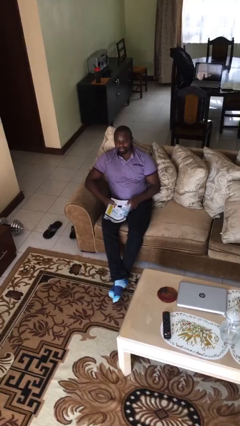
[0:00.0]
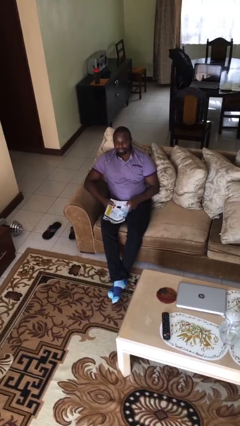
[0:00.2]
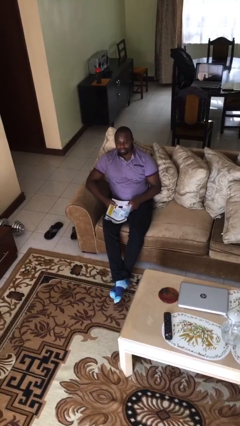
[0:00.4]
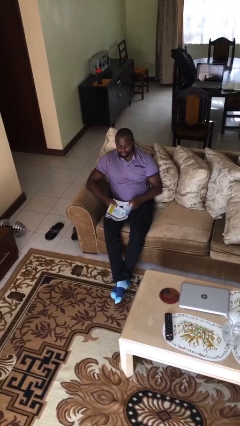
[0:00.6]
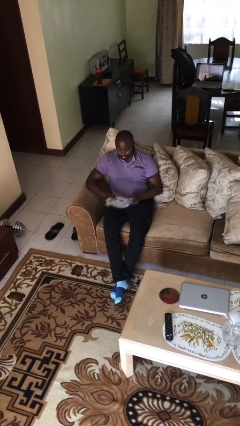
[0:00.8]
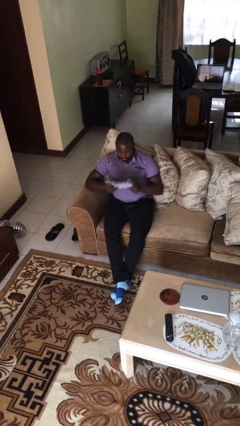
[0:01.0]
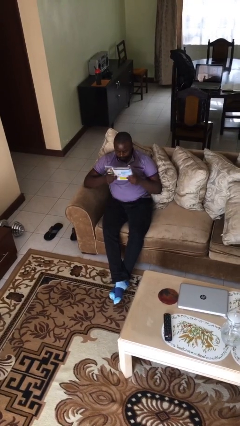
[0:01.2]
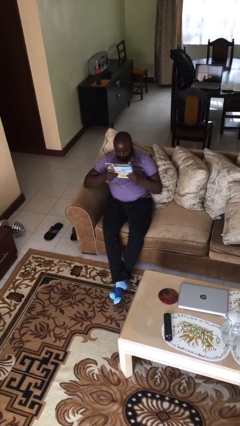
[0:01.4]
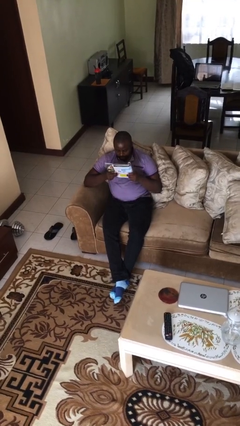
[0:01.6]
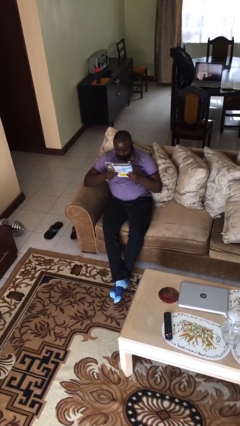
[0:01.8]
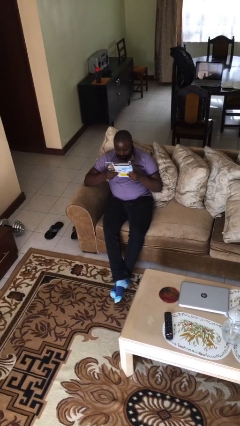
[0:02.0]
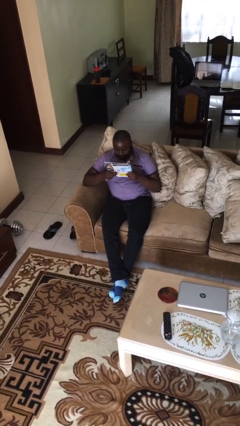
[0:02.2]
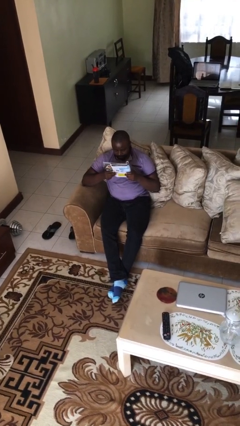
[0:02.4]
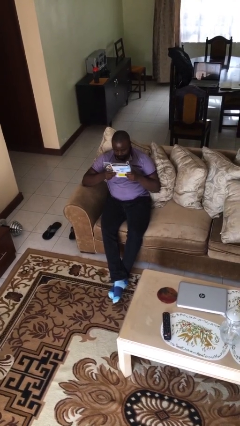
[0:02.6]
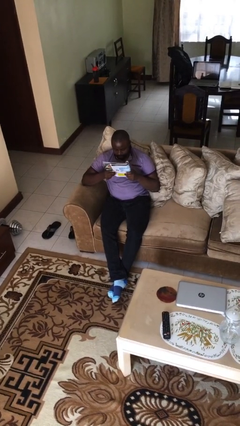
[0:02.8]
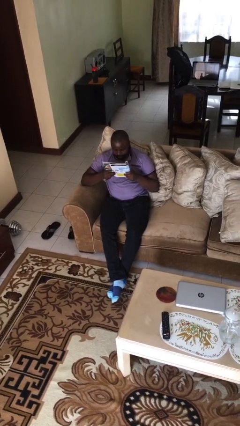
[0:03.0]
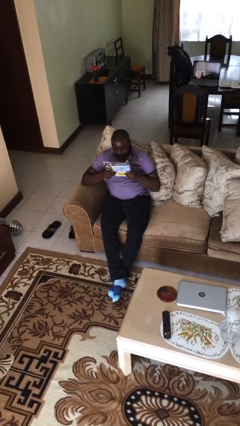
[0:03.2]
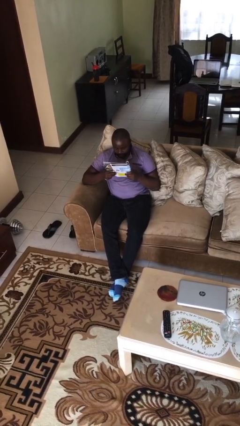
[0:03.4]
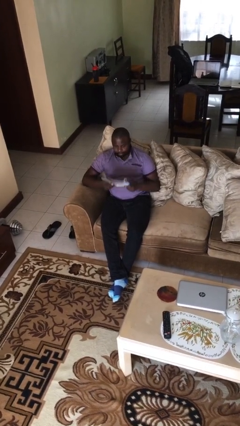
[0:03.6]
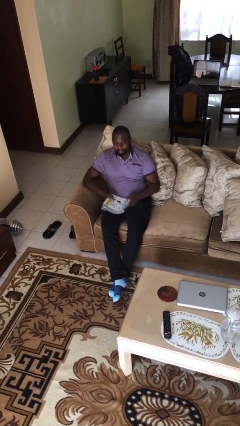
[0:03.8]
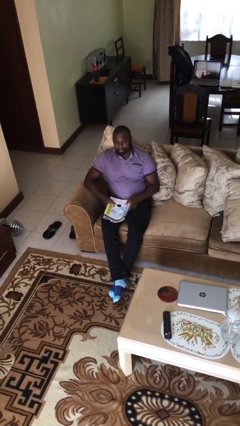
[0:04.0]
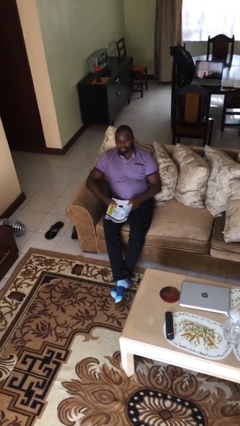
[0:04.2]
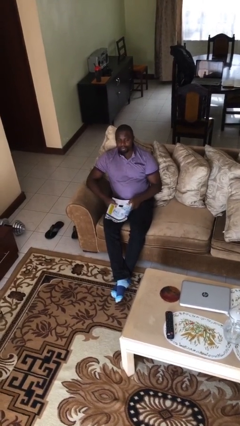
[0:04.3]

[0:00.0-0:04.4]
person reads document

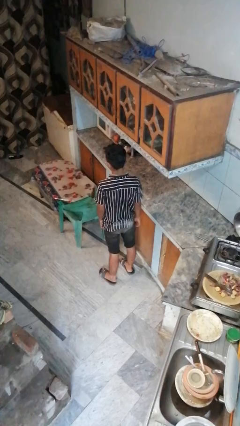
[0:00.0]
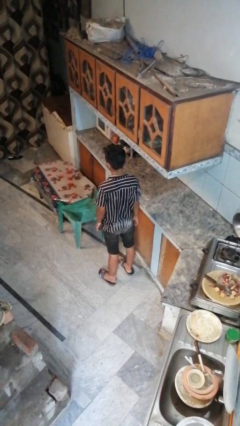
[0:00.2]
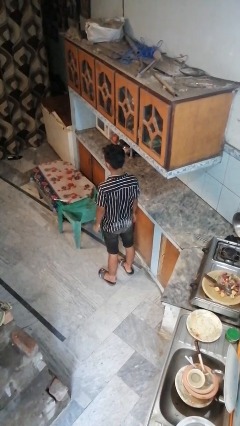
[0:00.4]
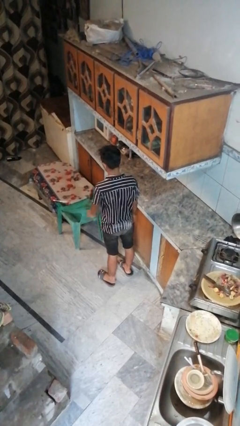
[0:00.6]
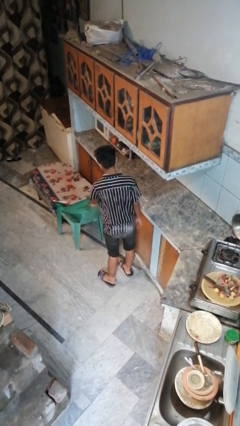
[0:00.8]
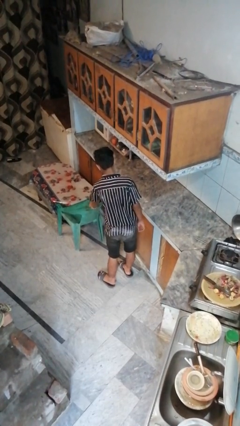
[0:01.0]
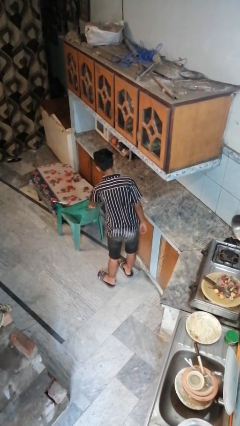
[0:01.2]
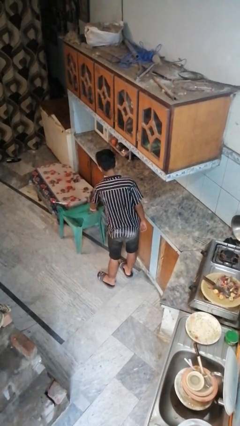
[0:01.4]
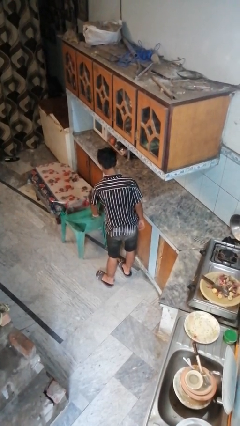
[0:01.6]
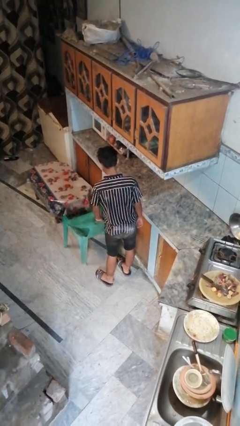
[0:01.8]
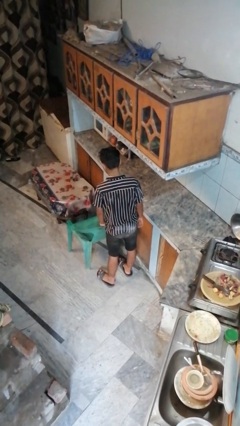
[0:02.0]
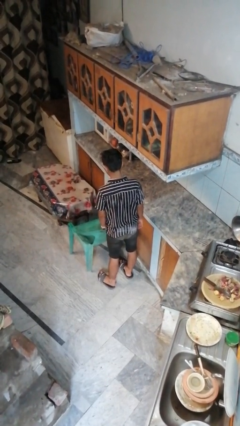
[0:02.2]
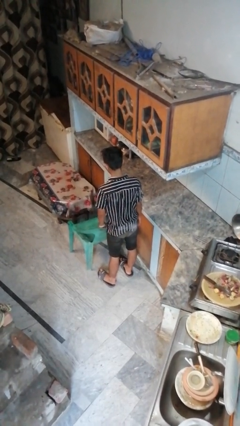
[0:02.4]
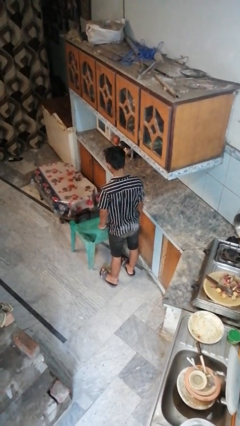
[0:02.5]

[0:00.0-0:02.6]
person pulls out chair

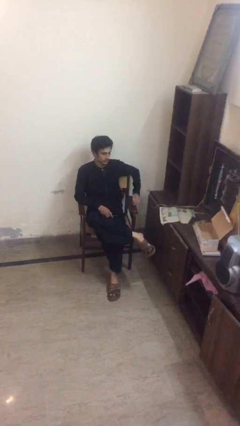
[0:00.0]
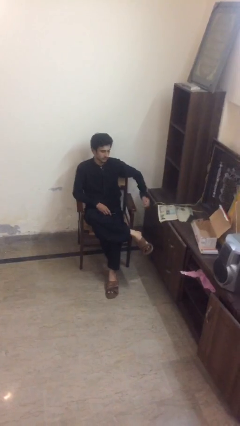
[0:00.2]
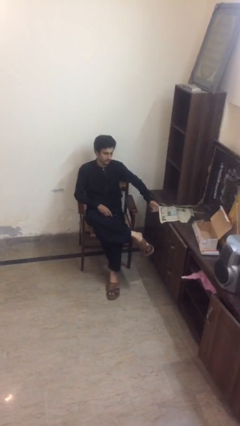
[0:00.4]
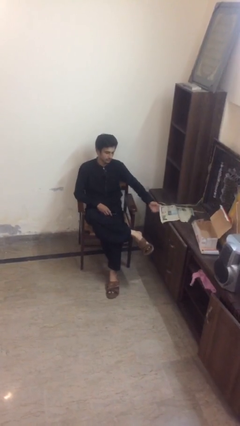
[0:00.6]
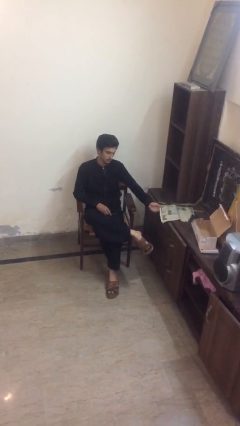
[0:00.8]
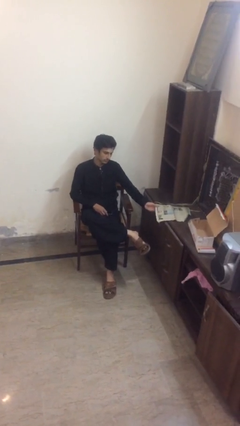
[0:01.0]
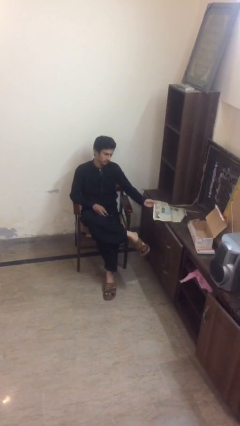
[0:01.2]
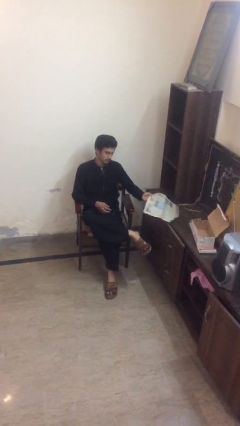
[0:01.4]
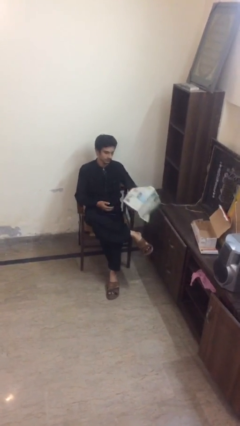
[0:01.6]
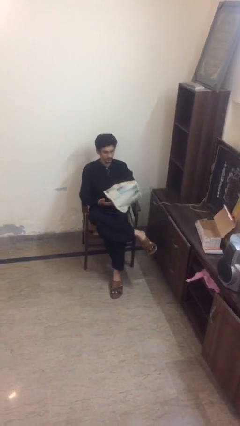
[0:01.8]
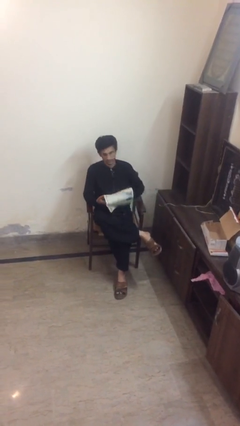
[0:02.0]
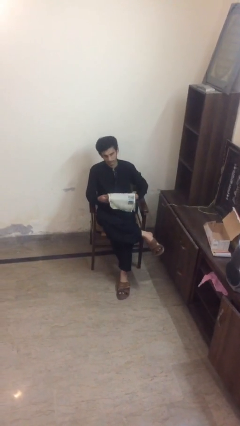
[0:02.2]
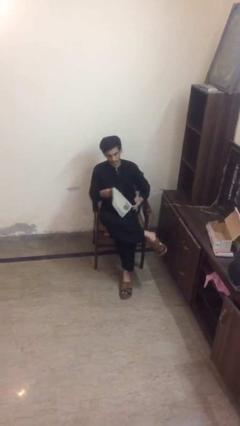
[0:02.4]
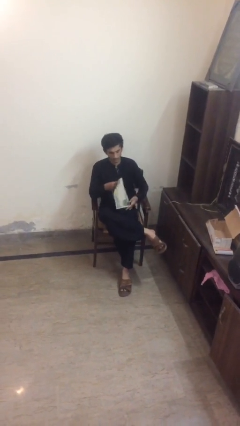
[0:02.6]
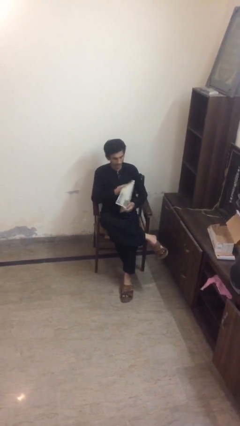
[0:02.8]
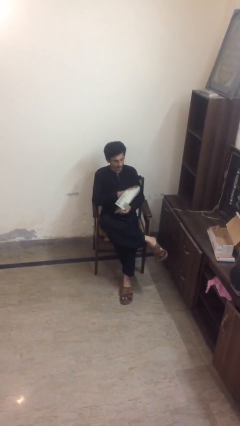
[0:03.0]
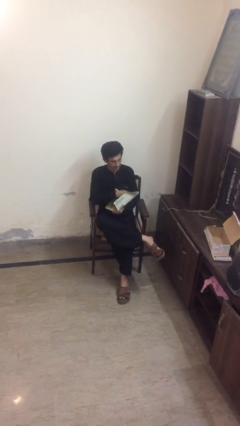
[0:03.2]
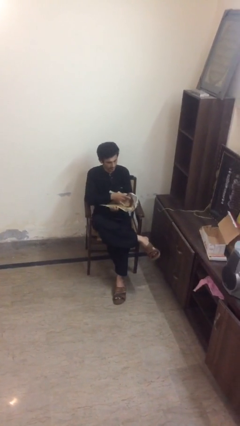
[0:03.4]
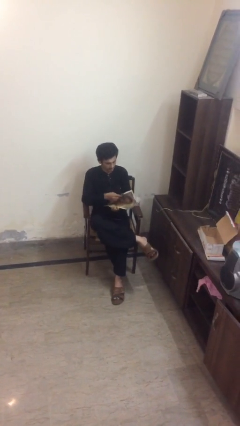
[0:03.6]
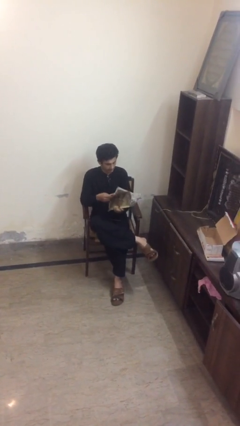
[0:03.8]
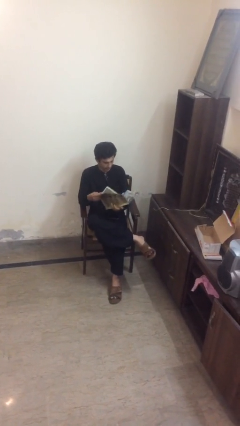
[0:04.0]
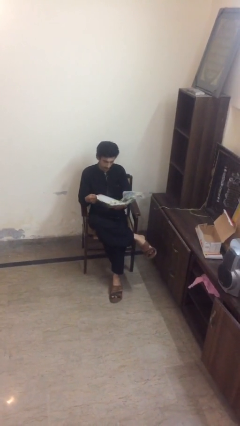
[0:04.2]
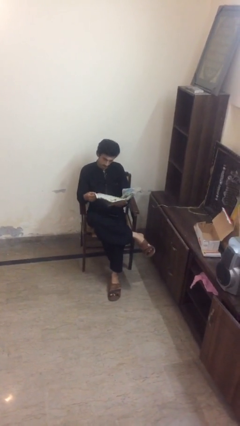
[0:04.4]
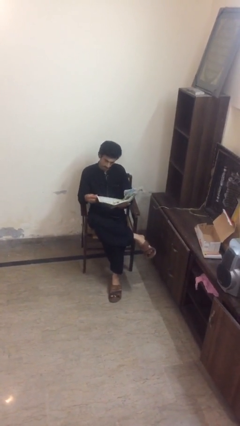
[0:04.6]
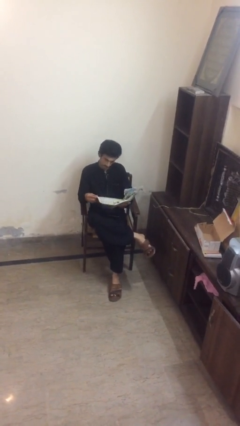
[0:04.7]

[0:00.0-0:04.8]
person picks up object from table

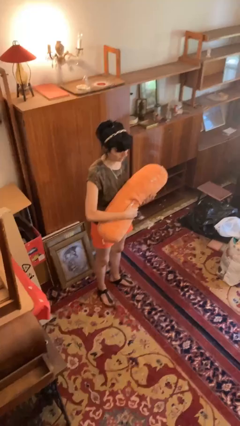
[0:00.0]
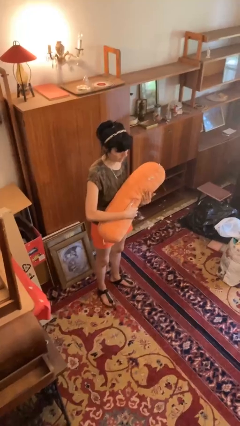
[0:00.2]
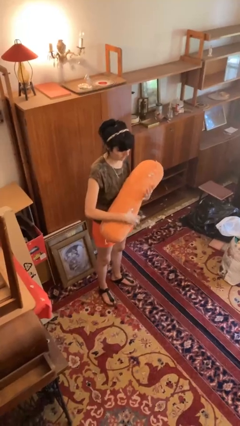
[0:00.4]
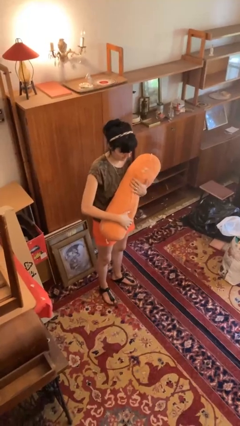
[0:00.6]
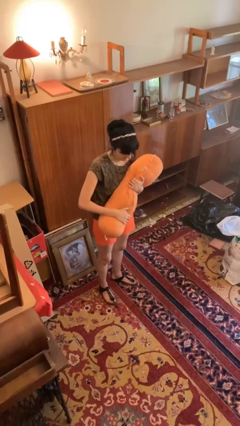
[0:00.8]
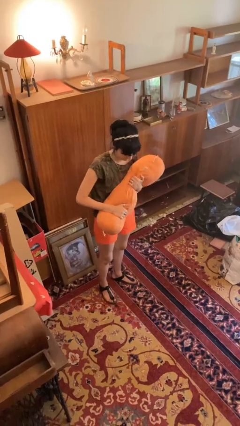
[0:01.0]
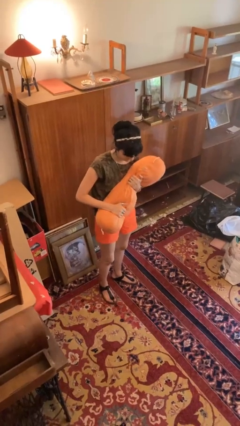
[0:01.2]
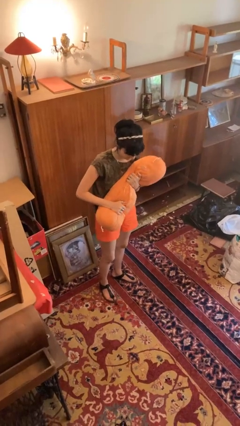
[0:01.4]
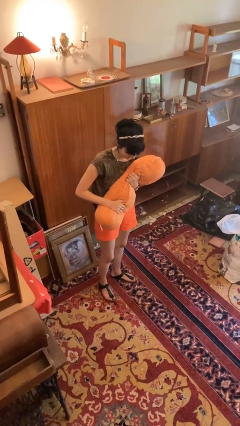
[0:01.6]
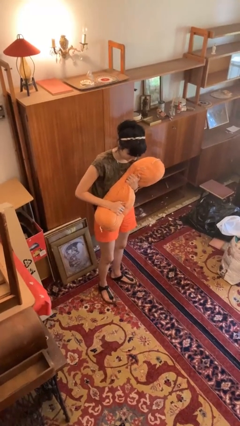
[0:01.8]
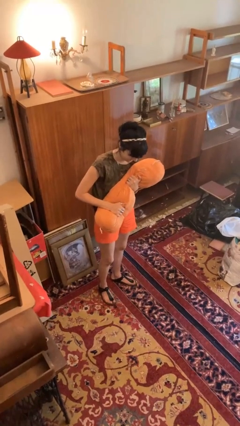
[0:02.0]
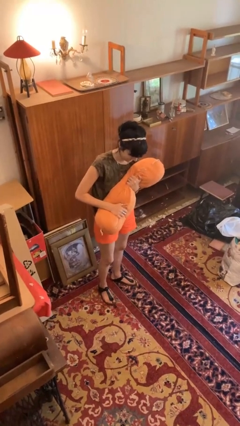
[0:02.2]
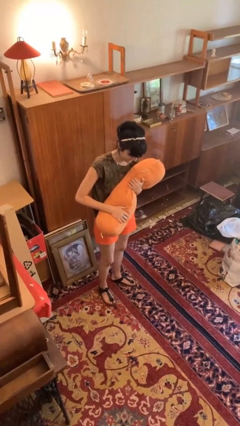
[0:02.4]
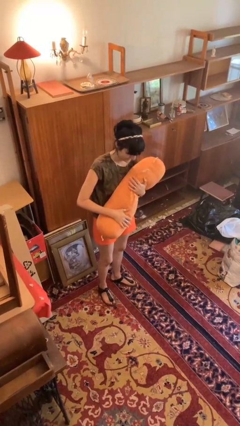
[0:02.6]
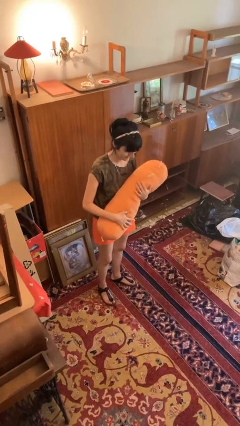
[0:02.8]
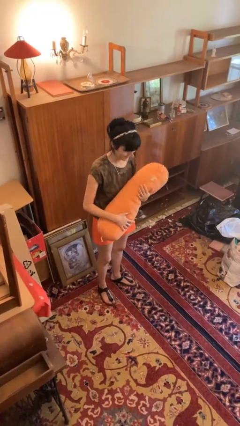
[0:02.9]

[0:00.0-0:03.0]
person squeezes object

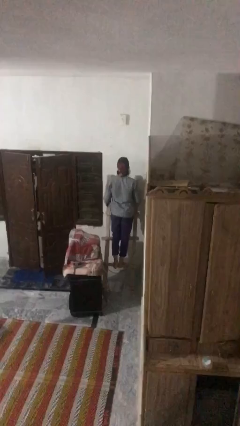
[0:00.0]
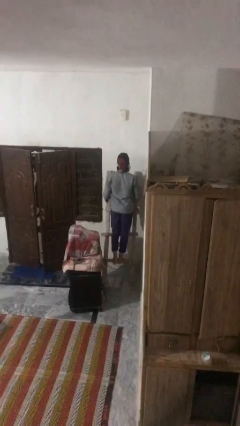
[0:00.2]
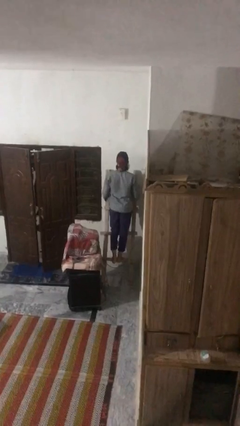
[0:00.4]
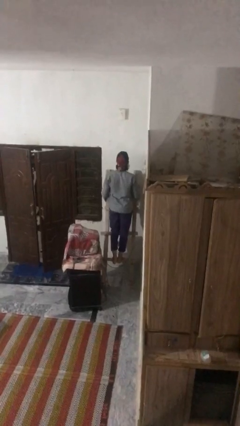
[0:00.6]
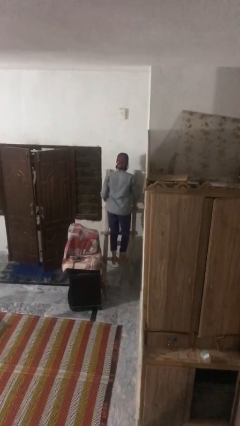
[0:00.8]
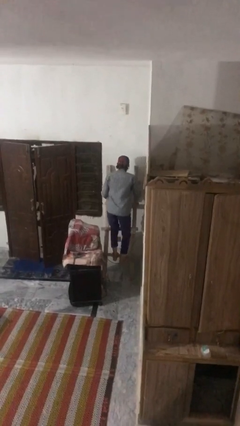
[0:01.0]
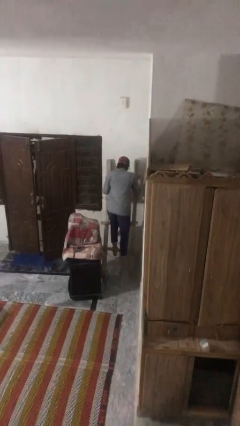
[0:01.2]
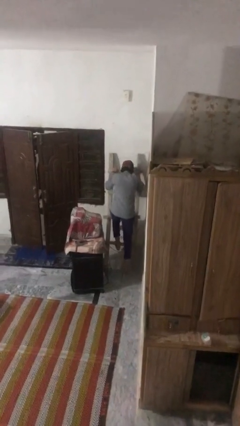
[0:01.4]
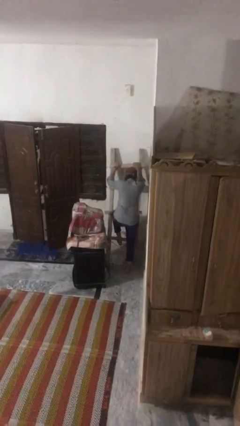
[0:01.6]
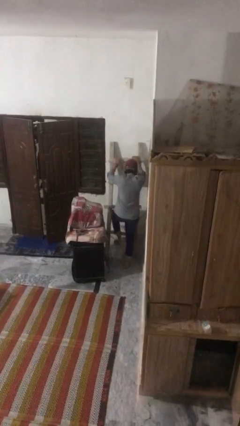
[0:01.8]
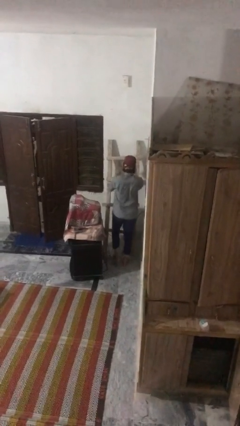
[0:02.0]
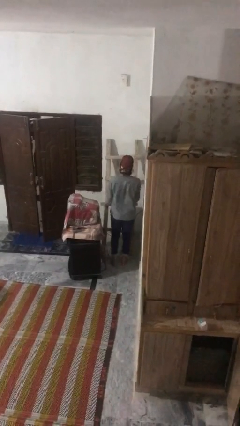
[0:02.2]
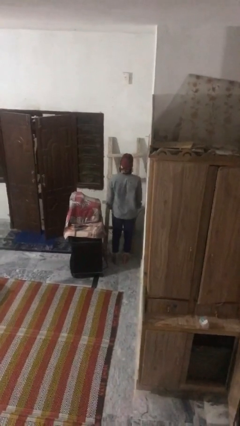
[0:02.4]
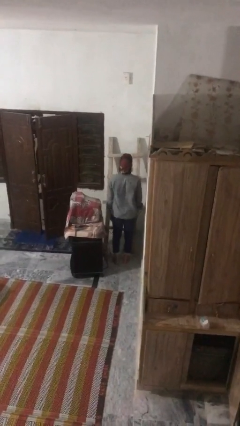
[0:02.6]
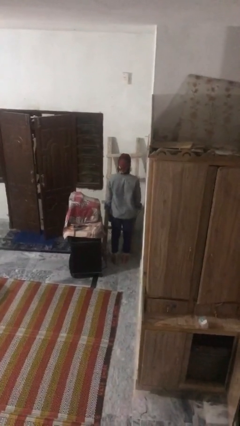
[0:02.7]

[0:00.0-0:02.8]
person climbs down ladder

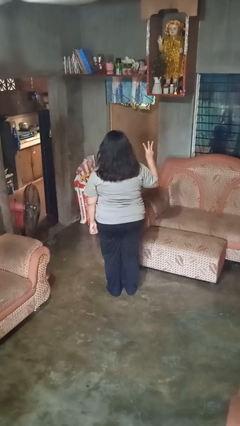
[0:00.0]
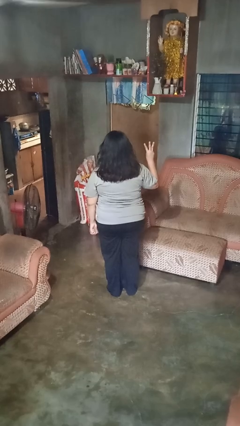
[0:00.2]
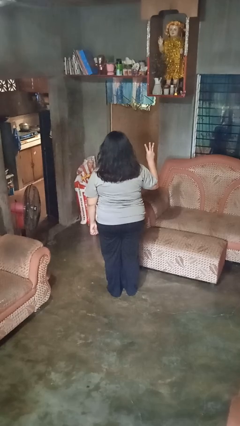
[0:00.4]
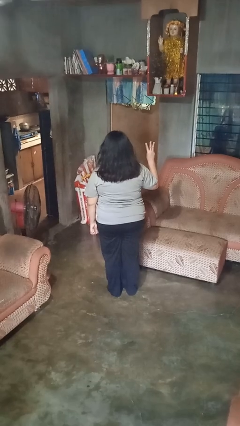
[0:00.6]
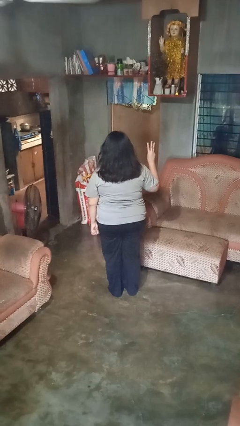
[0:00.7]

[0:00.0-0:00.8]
person gestures number three
